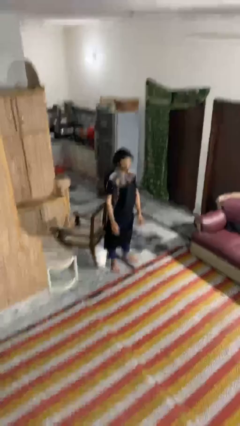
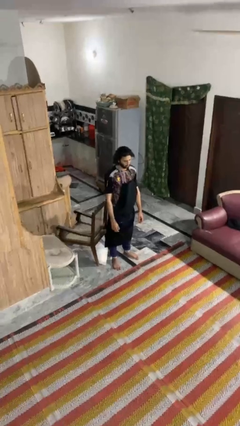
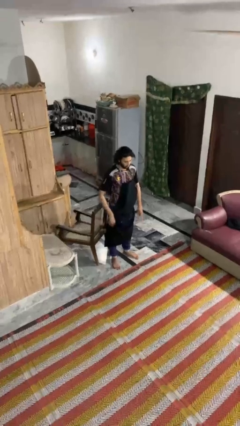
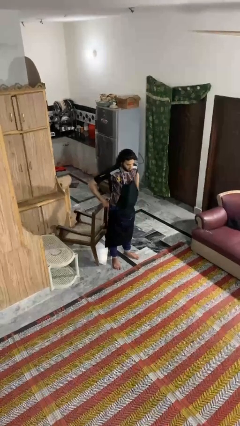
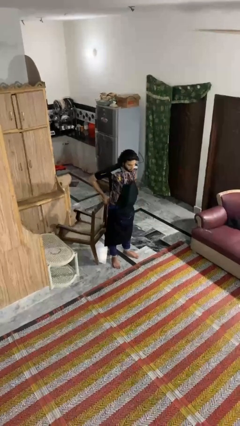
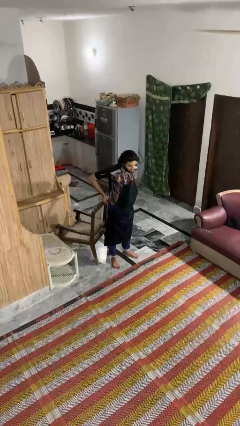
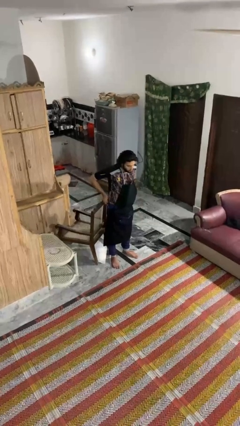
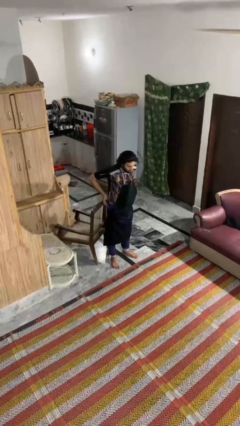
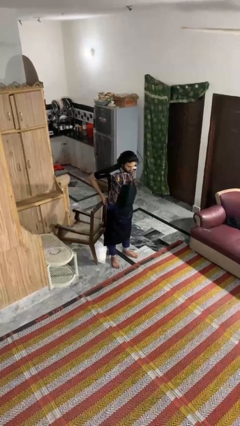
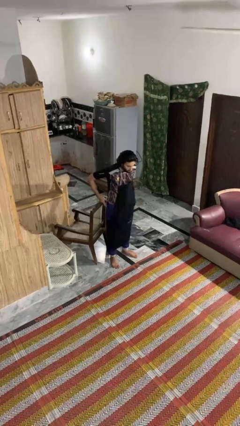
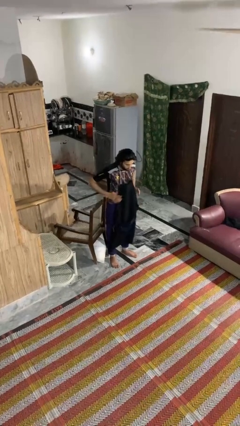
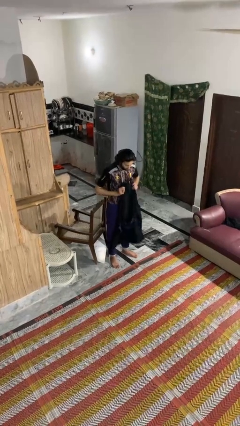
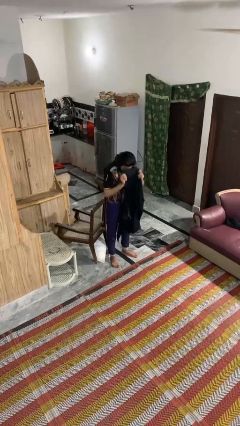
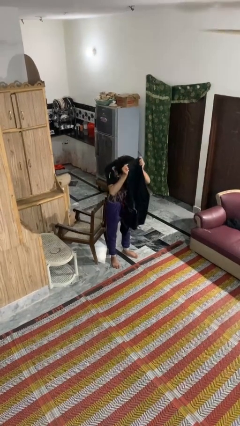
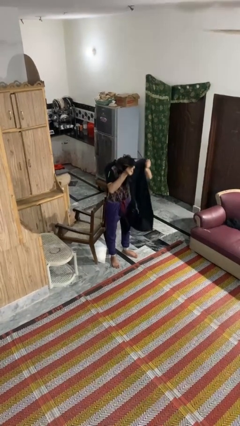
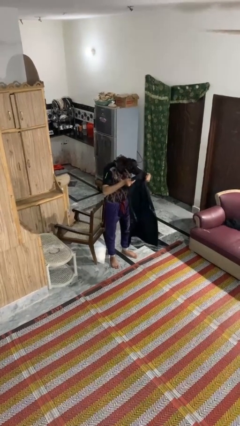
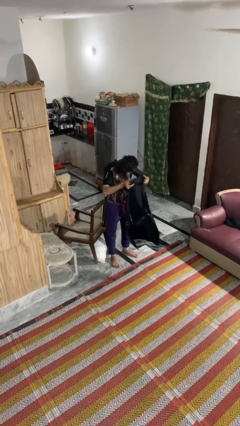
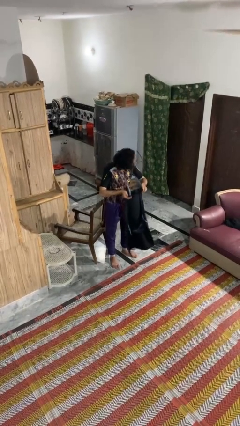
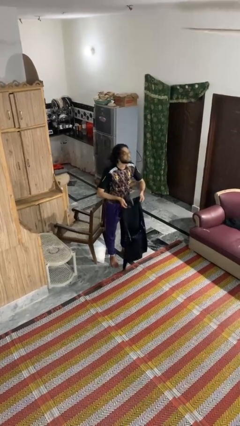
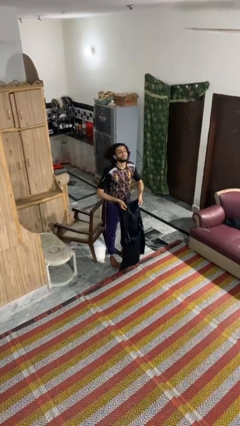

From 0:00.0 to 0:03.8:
person takes off apron

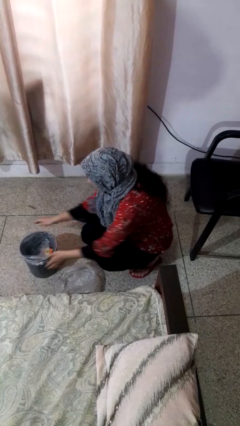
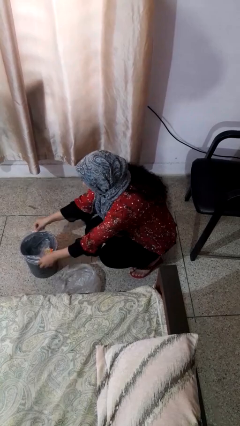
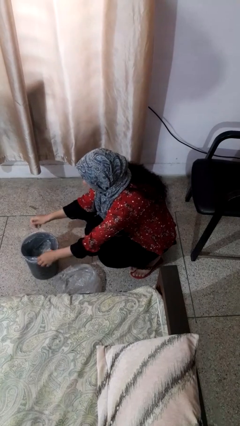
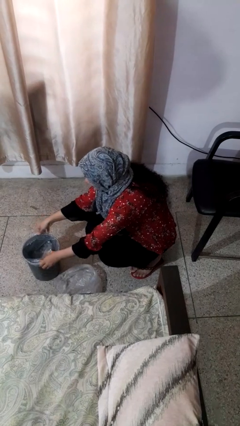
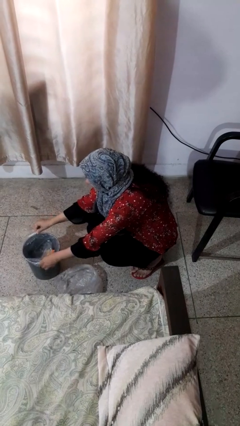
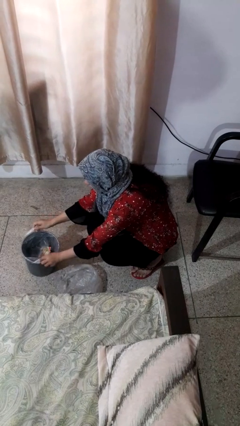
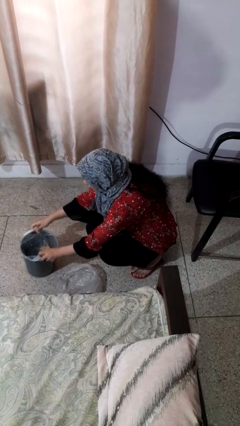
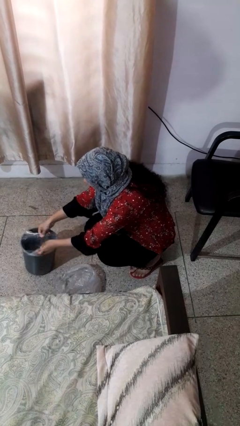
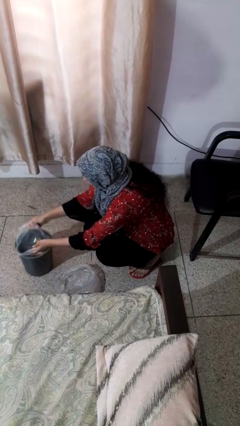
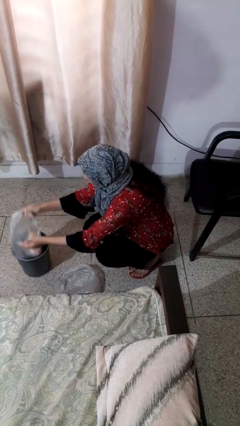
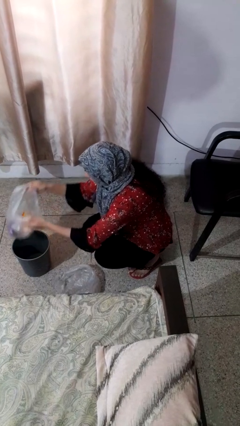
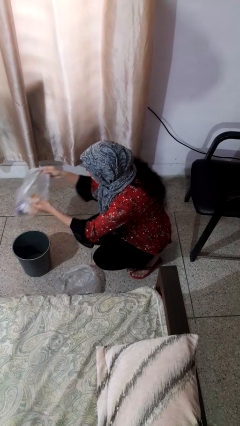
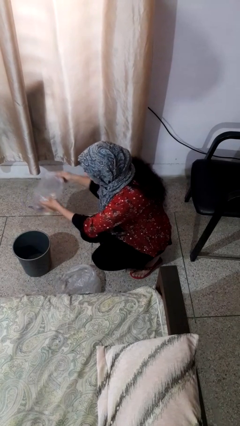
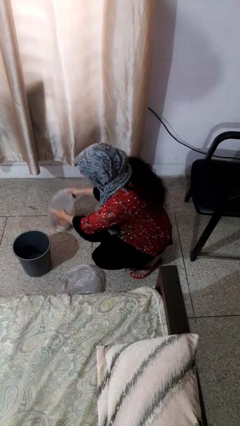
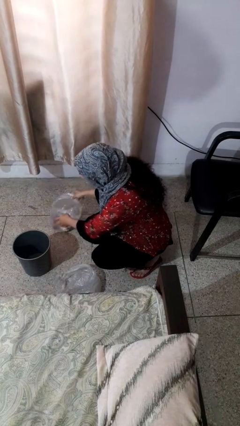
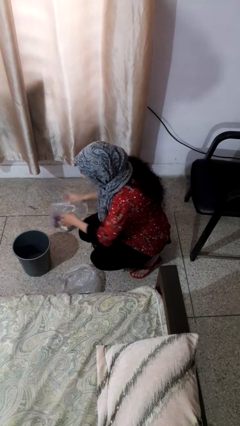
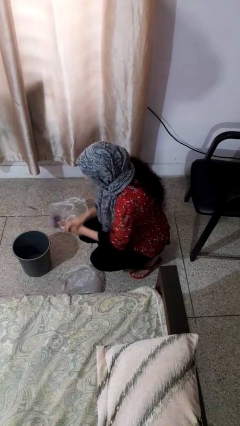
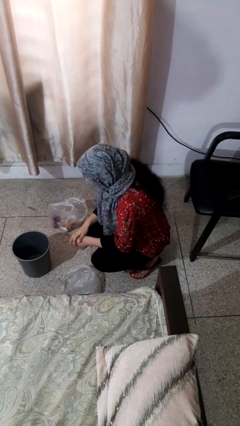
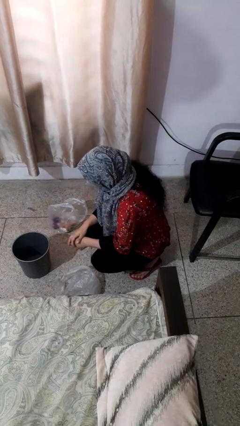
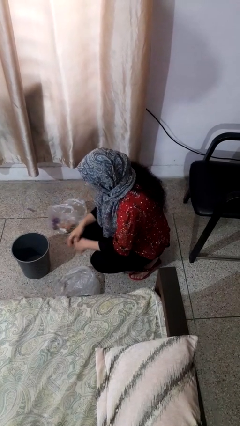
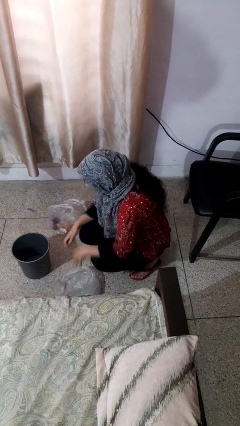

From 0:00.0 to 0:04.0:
person removes trashbag from trashcan

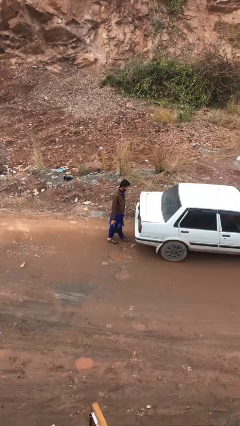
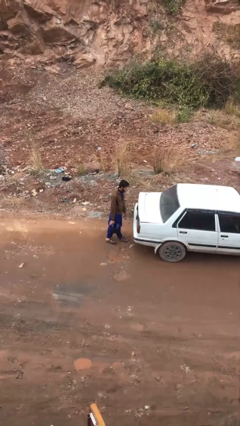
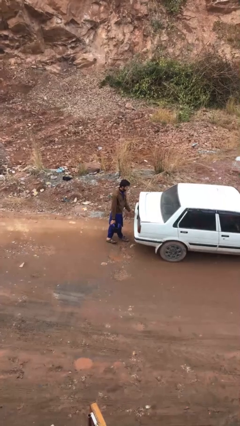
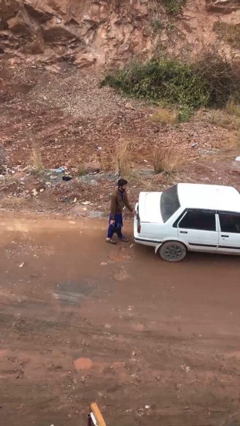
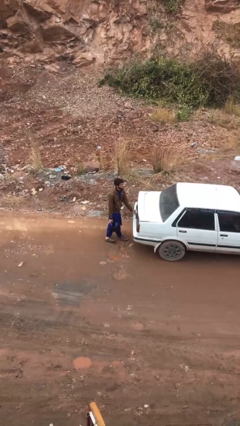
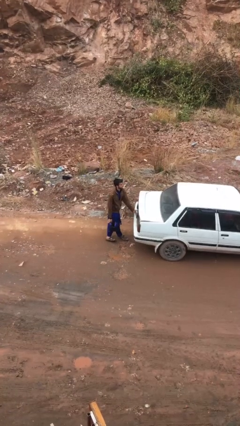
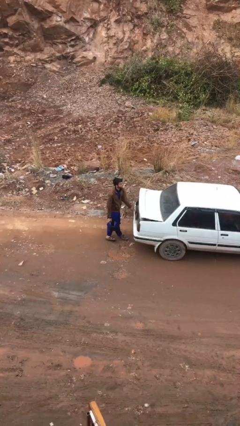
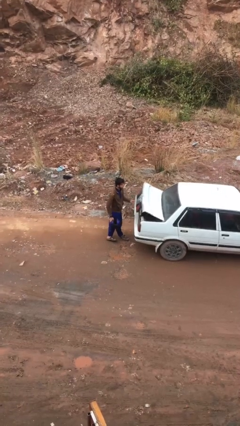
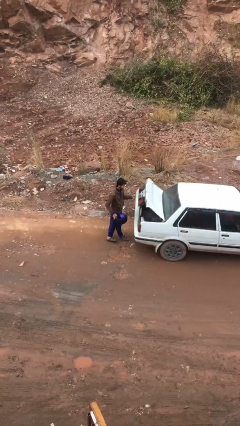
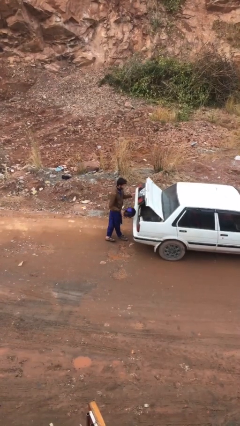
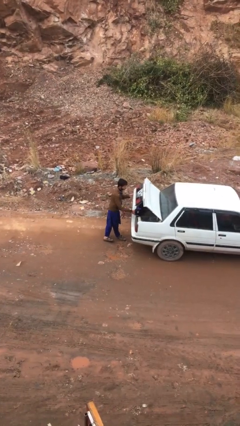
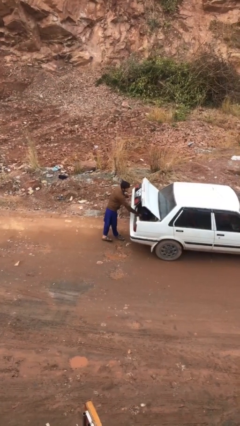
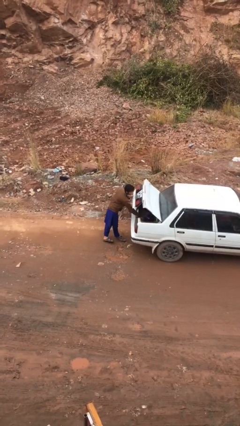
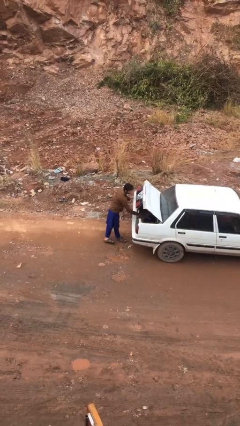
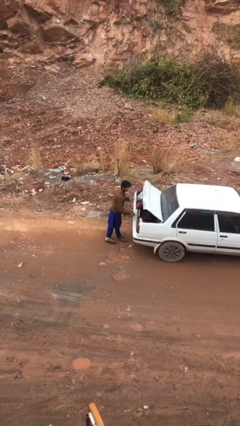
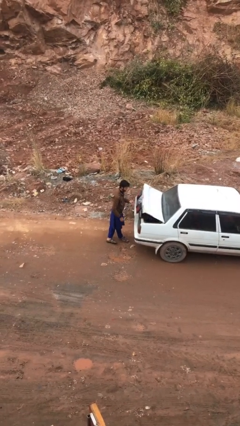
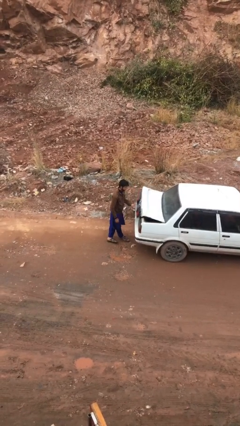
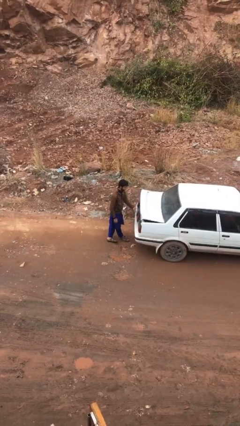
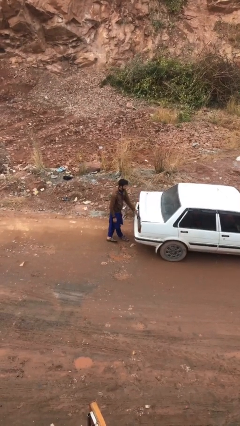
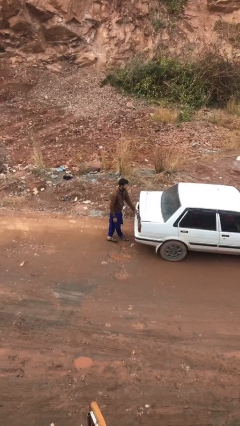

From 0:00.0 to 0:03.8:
person loads car

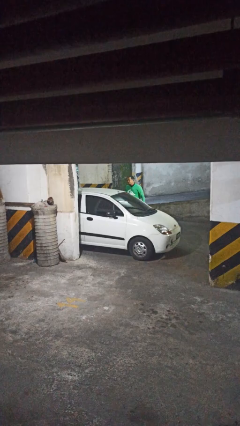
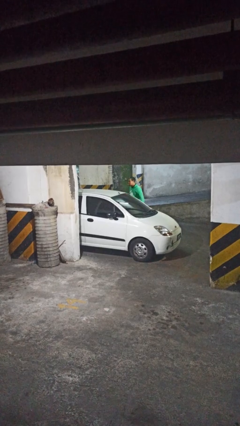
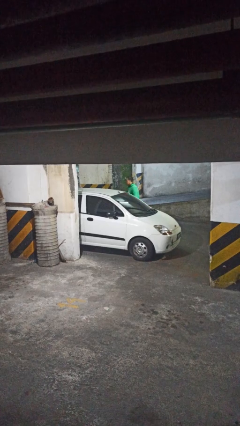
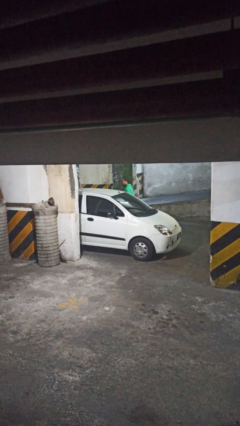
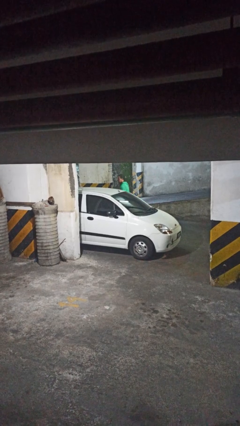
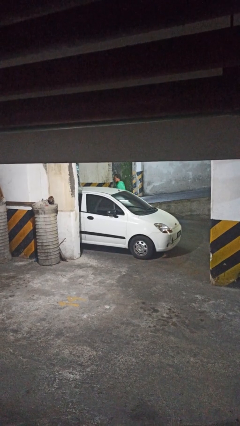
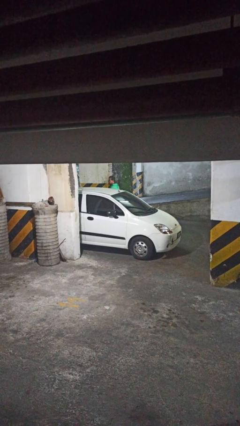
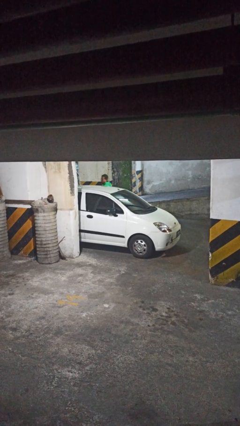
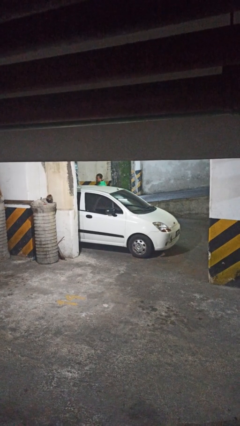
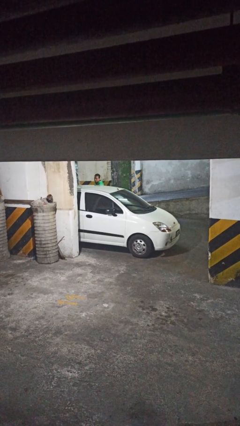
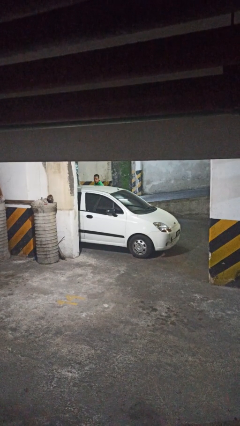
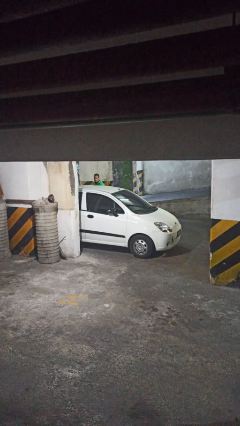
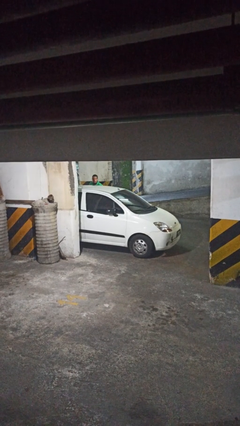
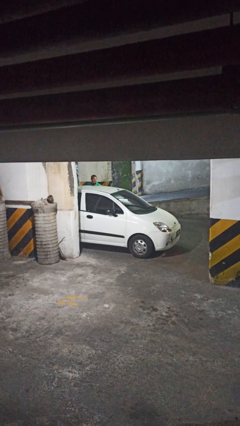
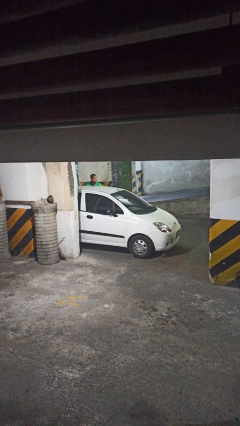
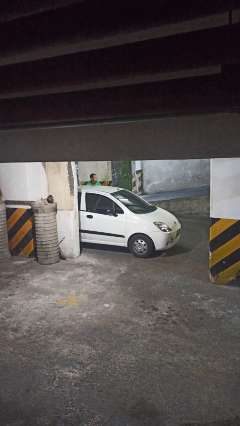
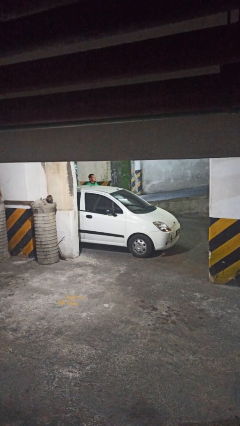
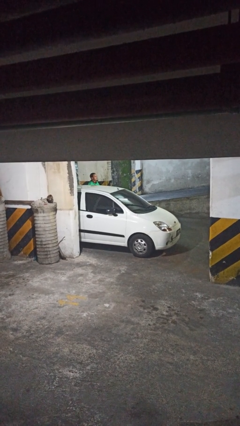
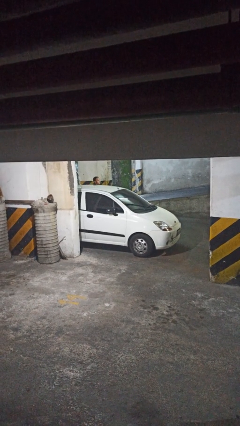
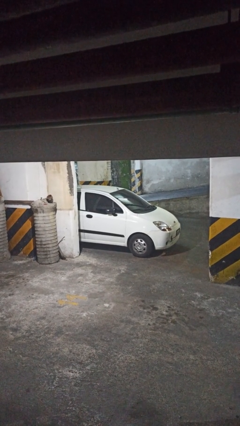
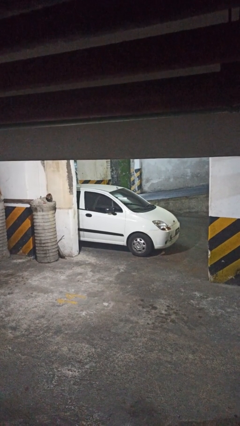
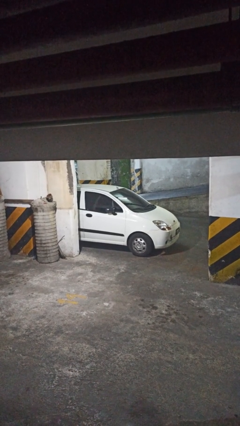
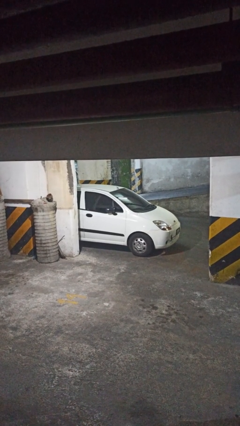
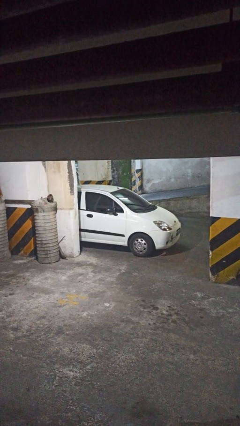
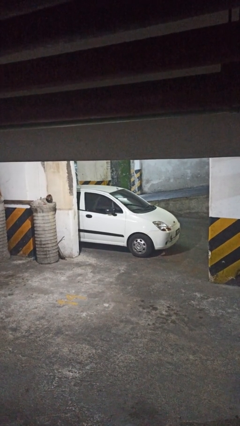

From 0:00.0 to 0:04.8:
car picks up person

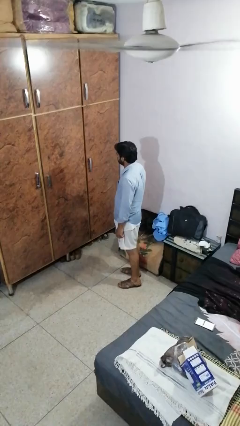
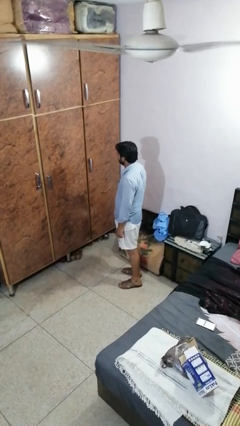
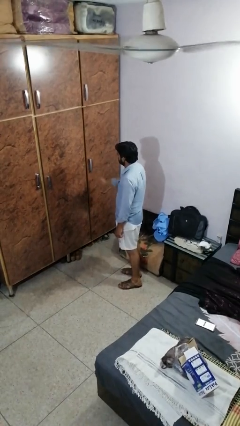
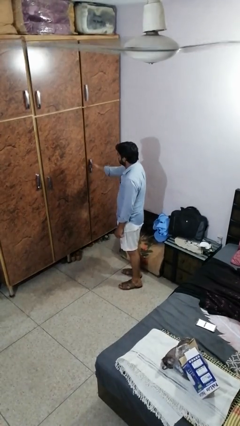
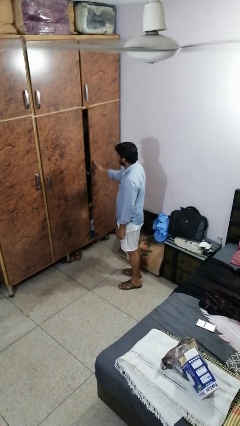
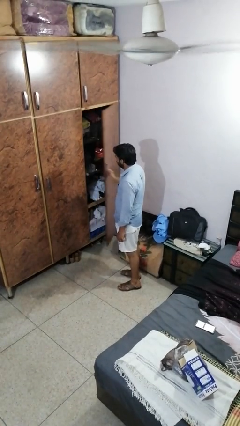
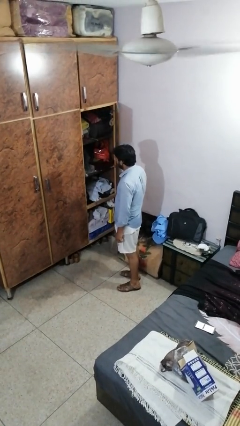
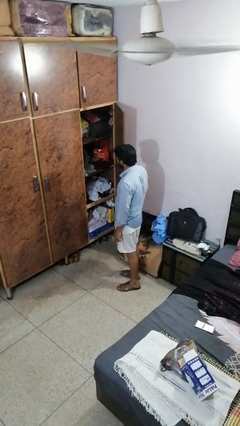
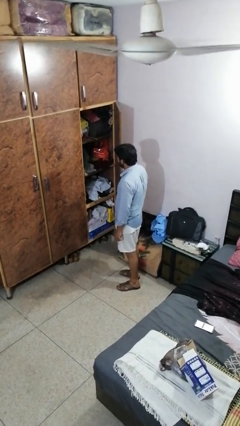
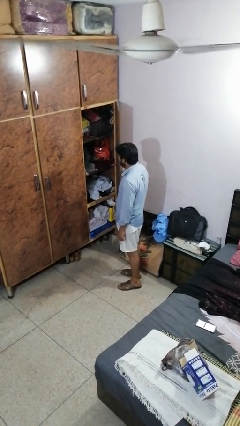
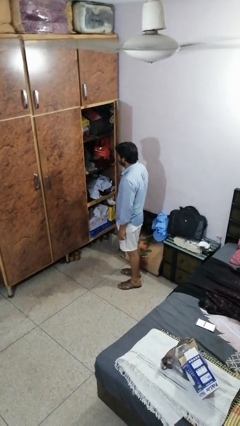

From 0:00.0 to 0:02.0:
person opens closet door
